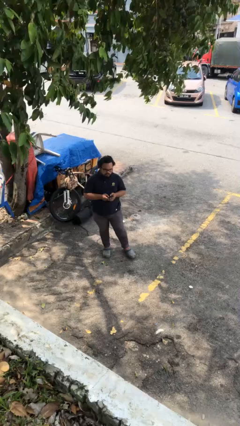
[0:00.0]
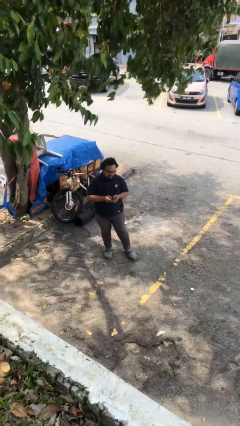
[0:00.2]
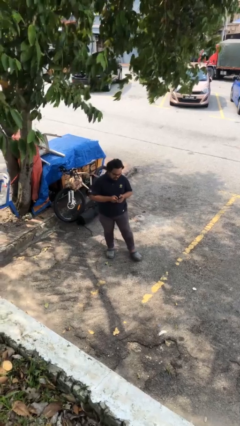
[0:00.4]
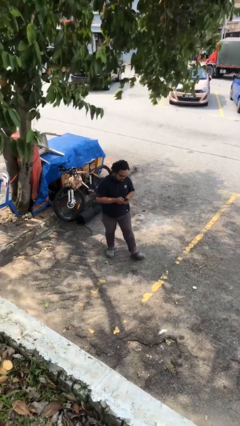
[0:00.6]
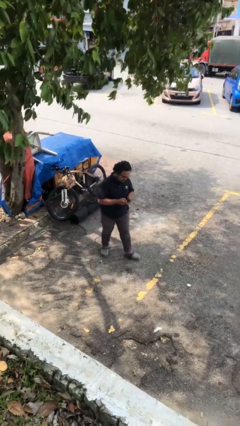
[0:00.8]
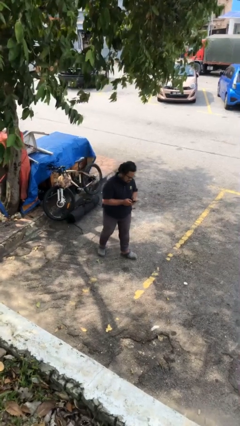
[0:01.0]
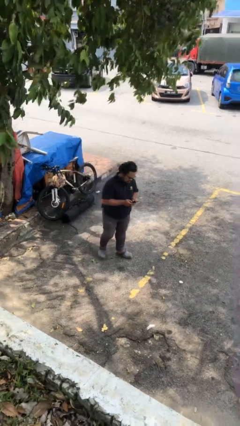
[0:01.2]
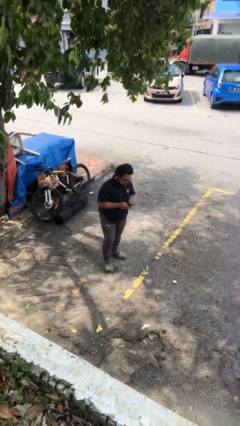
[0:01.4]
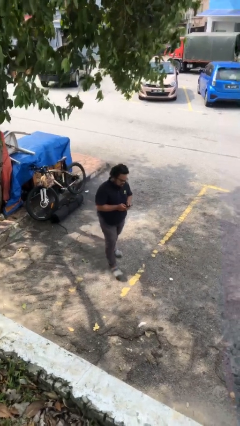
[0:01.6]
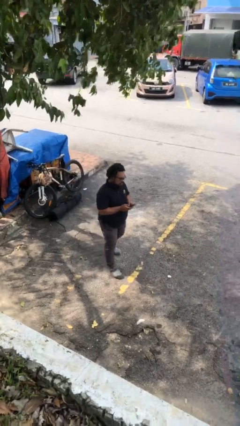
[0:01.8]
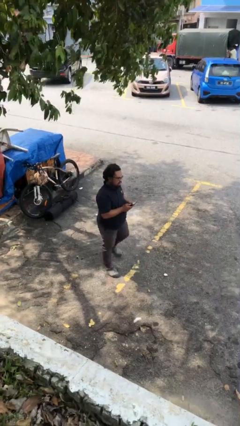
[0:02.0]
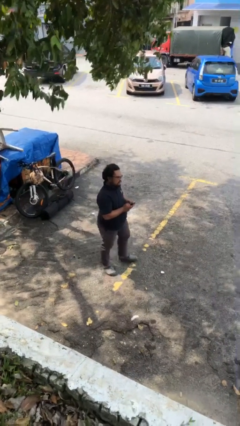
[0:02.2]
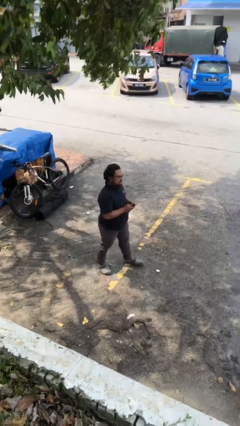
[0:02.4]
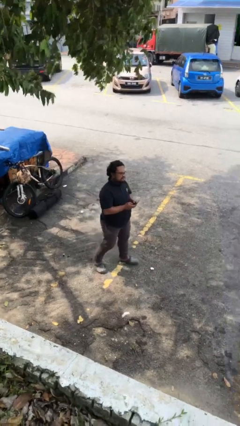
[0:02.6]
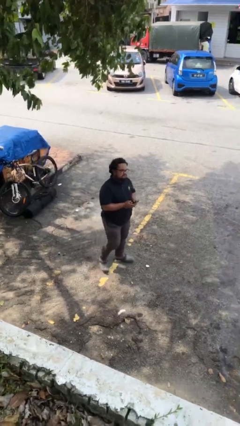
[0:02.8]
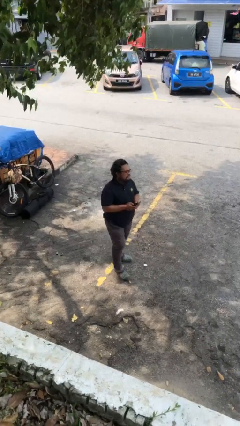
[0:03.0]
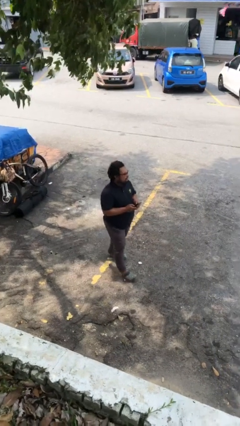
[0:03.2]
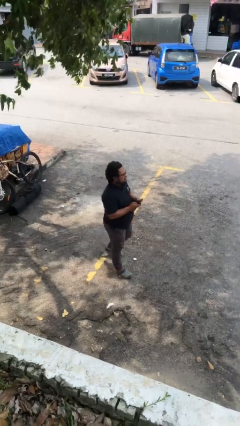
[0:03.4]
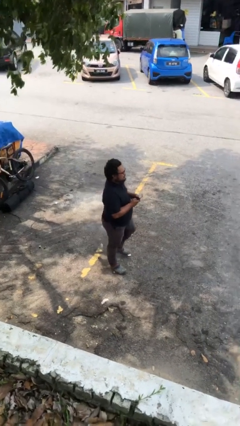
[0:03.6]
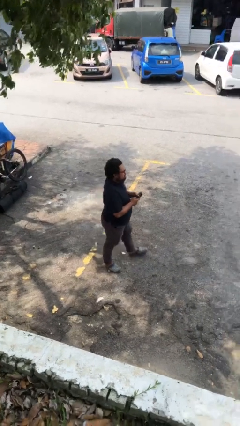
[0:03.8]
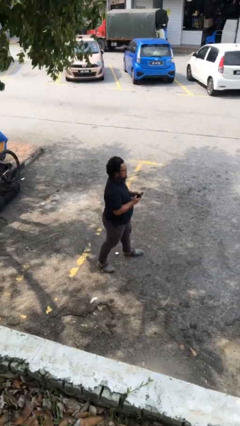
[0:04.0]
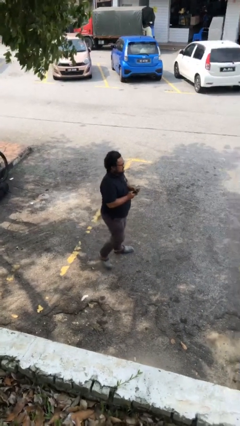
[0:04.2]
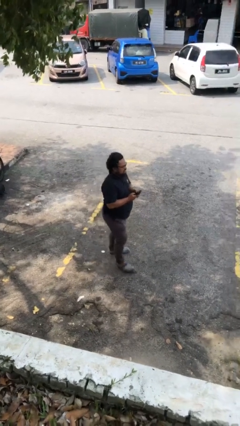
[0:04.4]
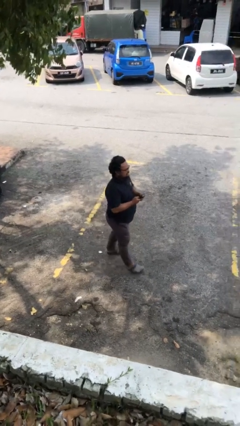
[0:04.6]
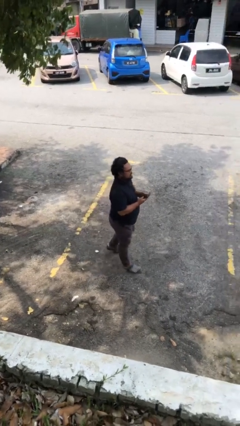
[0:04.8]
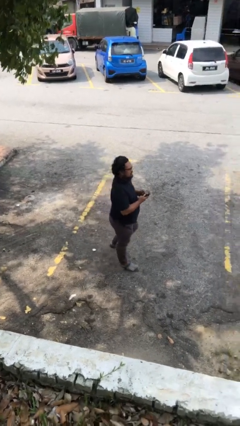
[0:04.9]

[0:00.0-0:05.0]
person texts on phone

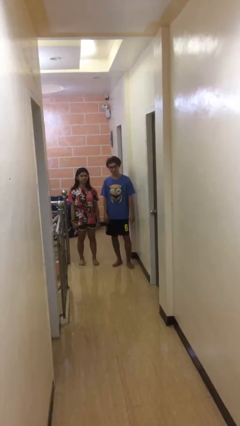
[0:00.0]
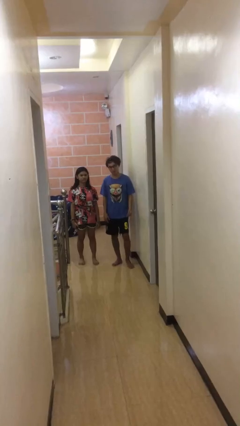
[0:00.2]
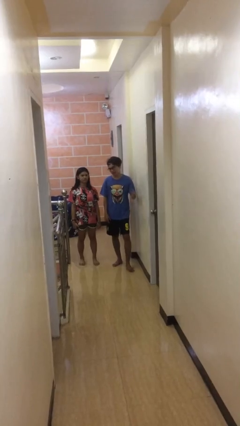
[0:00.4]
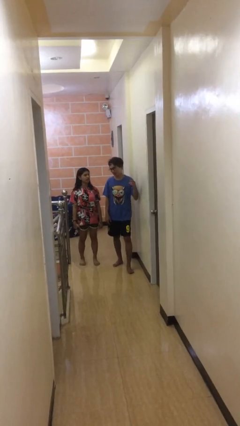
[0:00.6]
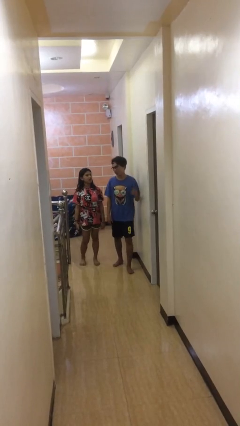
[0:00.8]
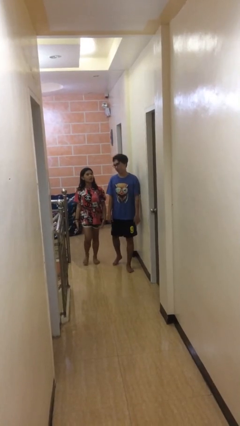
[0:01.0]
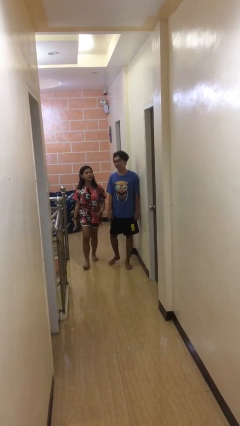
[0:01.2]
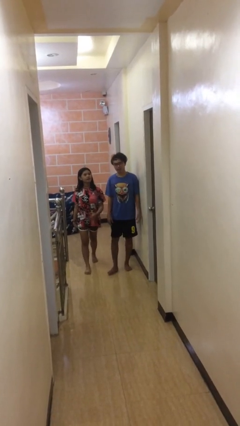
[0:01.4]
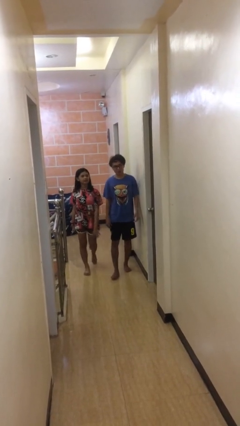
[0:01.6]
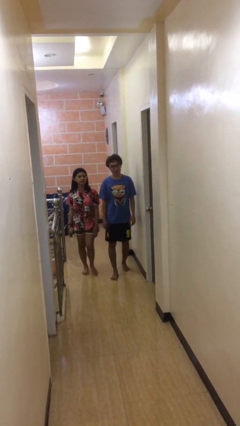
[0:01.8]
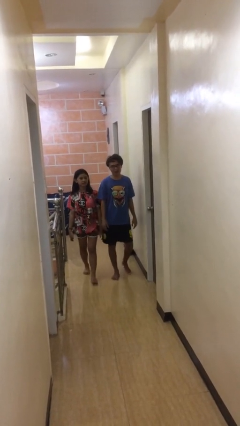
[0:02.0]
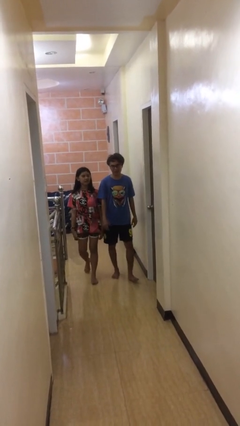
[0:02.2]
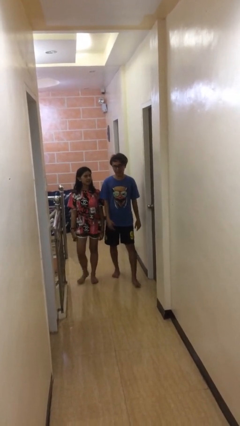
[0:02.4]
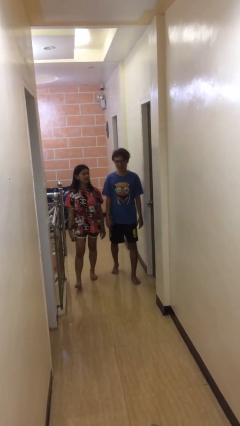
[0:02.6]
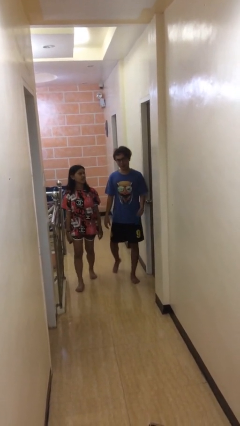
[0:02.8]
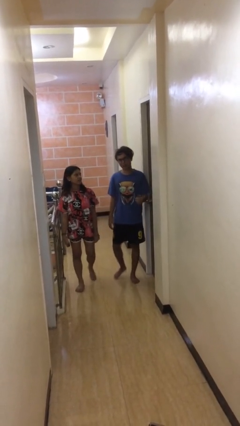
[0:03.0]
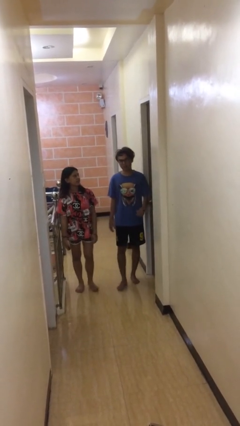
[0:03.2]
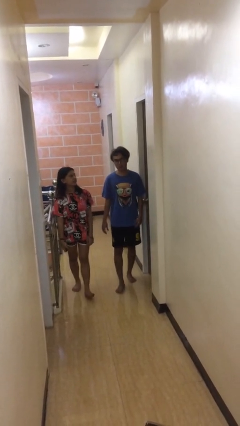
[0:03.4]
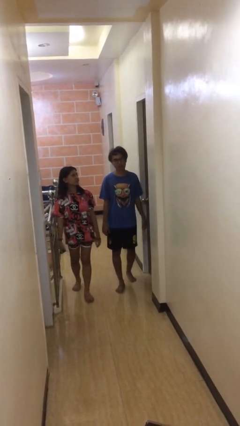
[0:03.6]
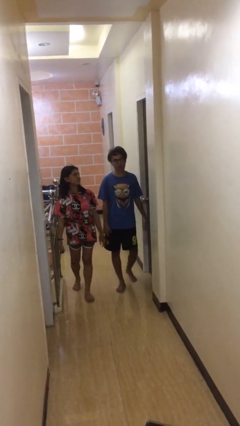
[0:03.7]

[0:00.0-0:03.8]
person talks to person

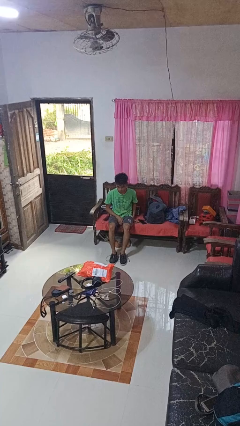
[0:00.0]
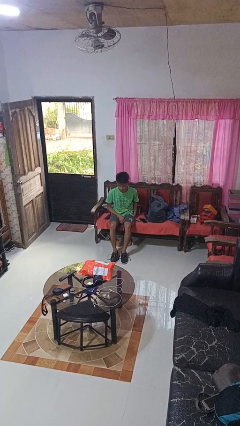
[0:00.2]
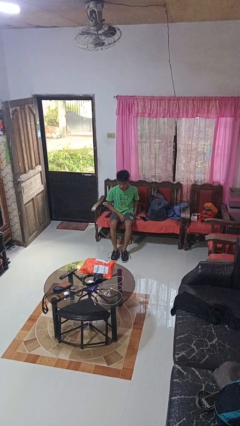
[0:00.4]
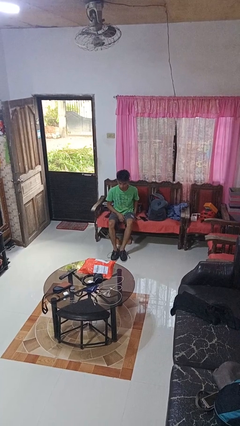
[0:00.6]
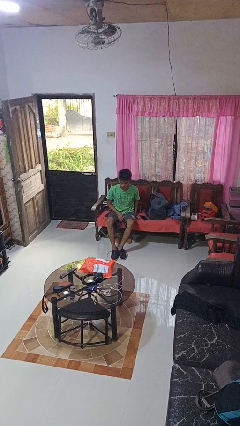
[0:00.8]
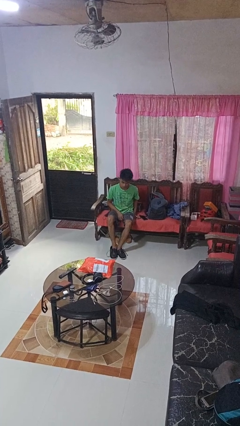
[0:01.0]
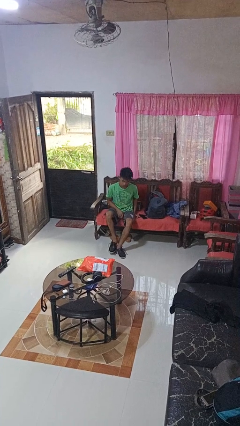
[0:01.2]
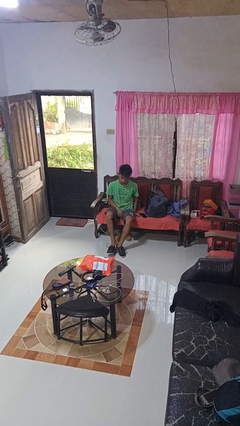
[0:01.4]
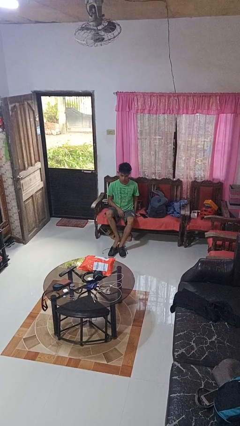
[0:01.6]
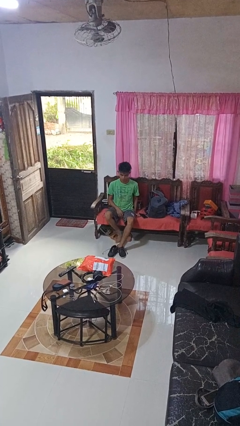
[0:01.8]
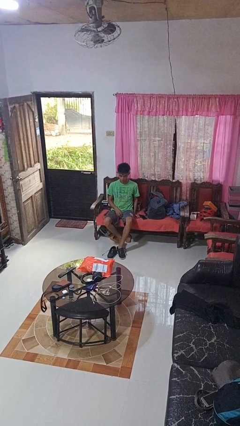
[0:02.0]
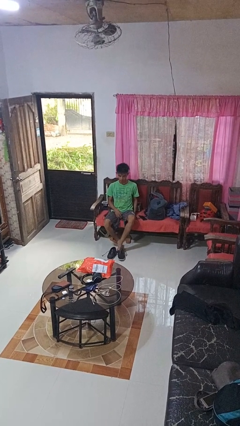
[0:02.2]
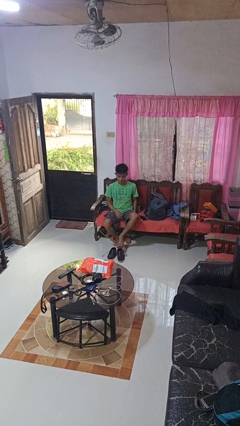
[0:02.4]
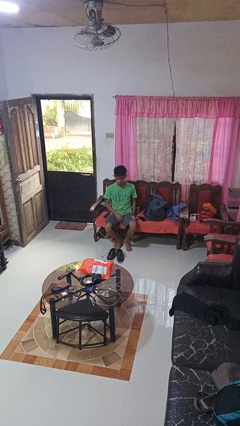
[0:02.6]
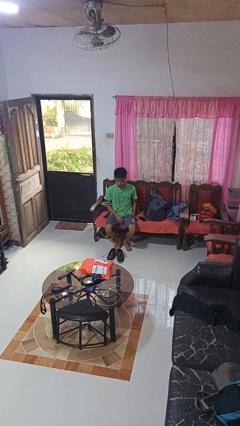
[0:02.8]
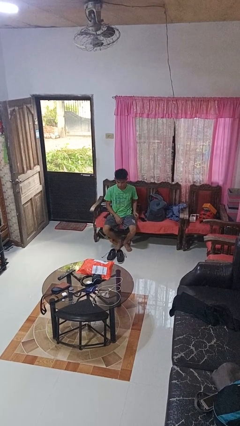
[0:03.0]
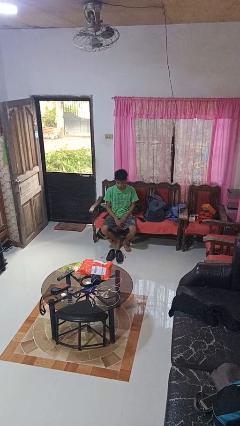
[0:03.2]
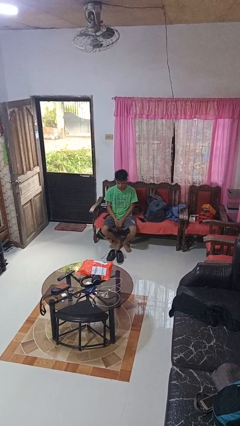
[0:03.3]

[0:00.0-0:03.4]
person takes off shoes

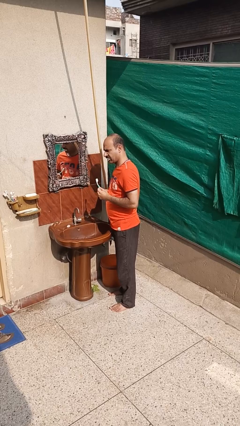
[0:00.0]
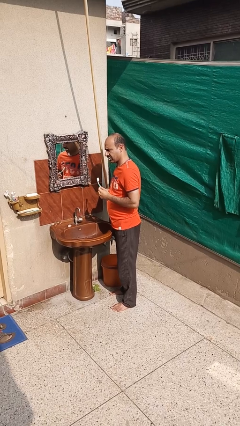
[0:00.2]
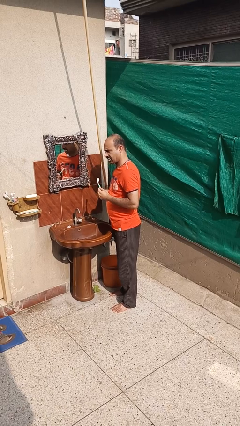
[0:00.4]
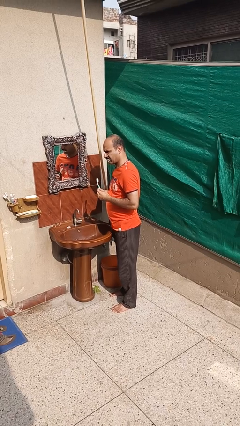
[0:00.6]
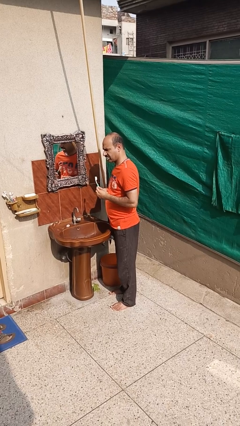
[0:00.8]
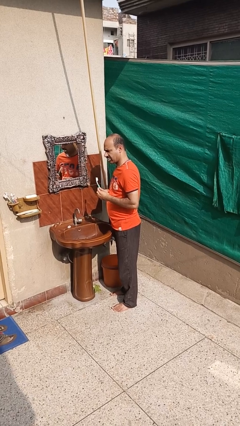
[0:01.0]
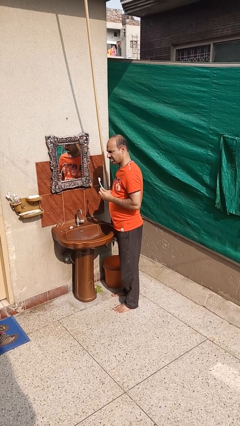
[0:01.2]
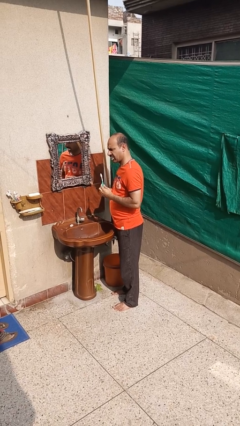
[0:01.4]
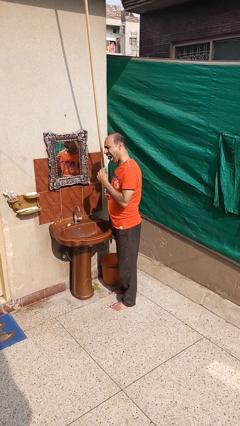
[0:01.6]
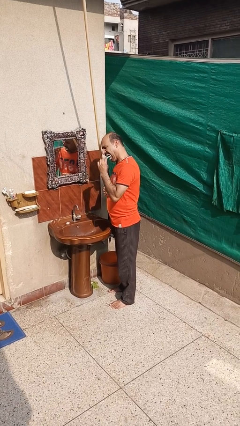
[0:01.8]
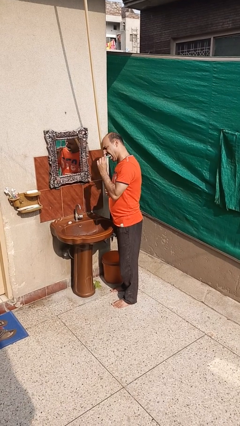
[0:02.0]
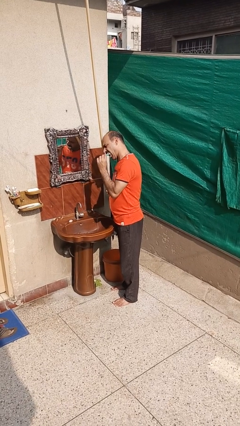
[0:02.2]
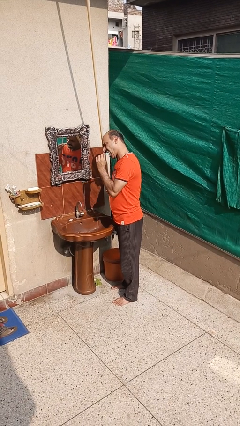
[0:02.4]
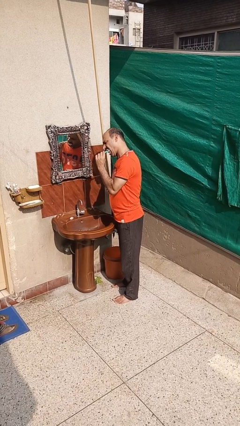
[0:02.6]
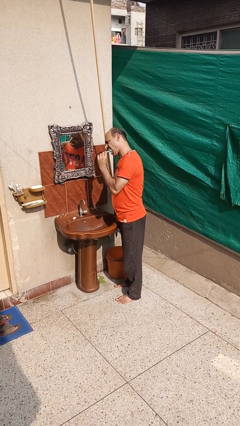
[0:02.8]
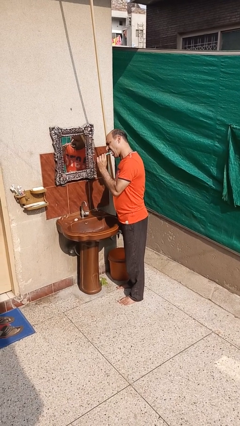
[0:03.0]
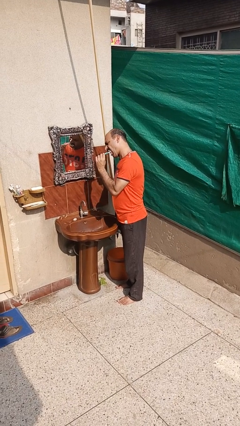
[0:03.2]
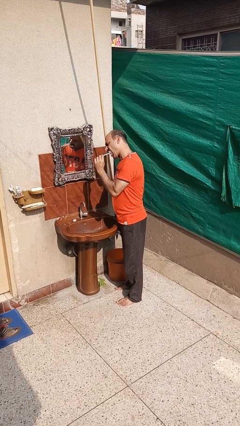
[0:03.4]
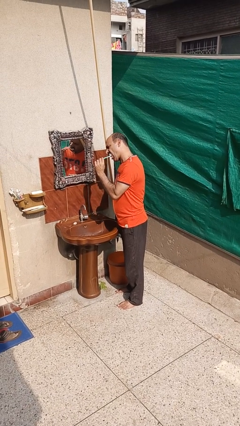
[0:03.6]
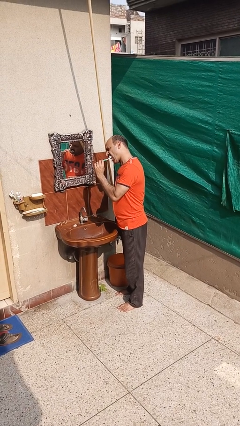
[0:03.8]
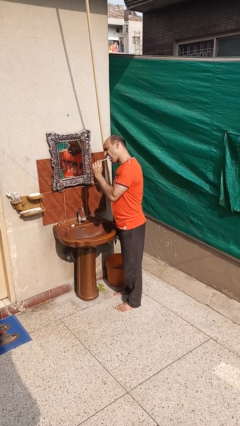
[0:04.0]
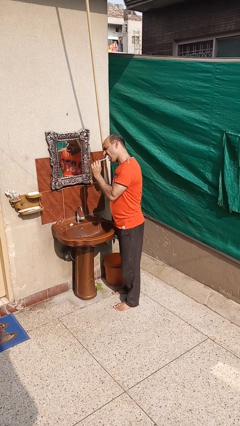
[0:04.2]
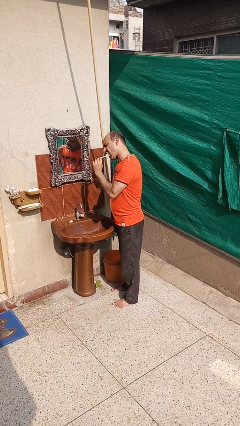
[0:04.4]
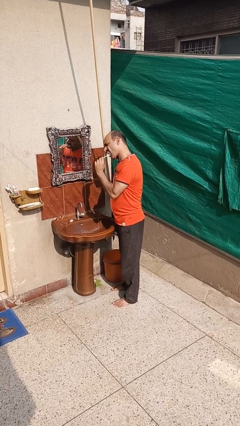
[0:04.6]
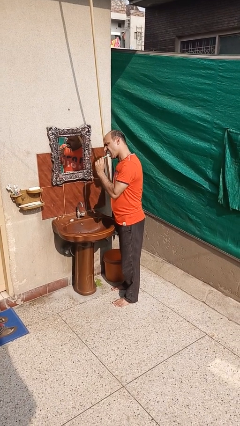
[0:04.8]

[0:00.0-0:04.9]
person brushes teeth

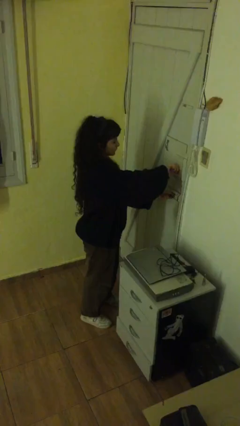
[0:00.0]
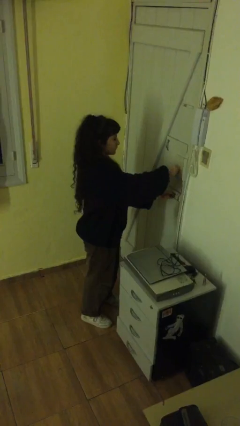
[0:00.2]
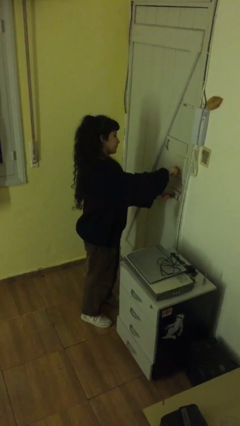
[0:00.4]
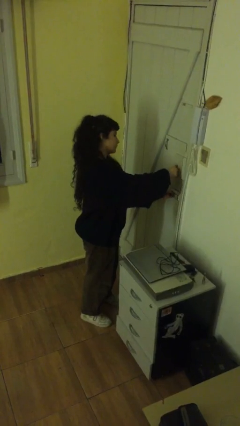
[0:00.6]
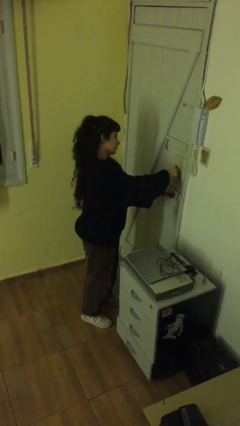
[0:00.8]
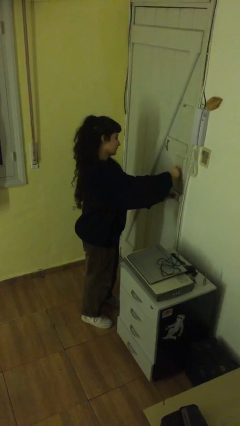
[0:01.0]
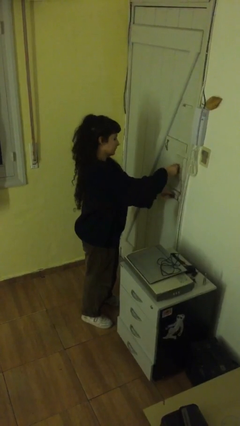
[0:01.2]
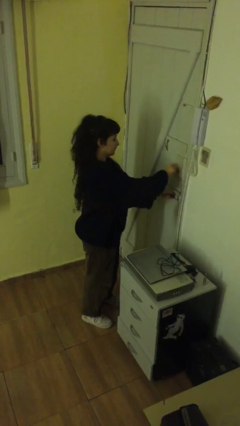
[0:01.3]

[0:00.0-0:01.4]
person locks door with keys
